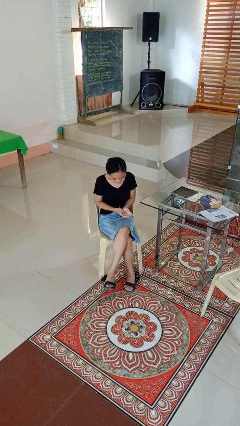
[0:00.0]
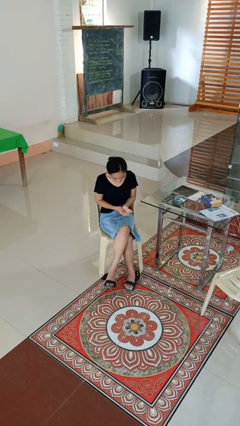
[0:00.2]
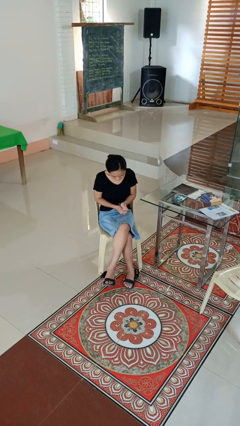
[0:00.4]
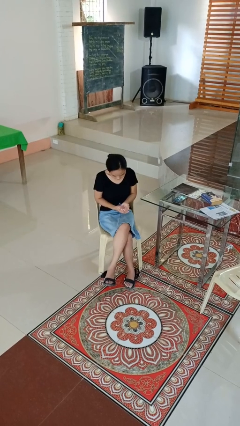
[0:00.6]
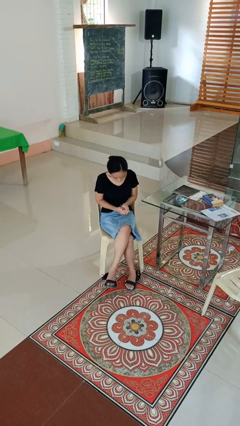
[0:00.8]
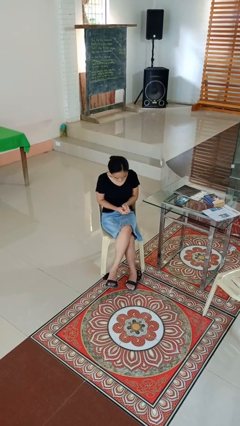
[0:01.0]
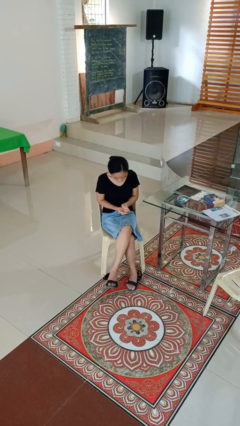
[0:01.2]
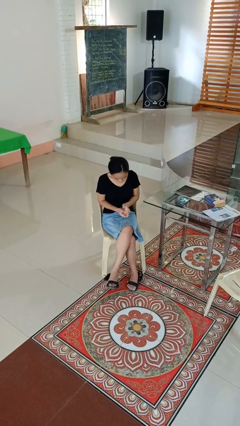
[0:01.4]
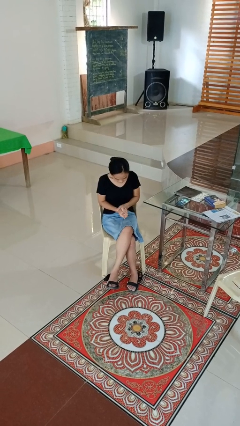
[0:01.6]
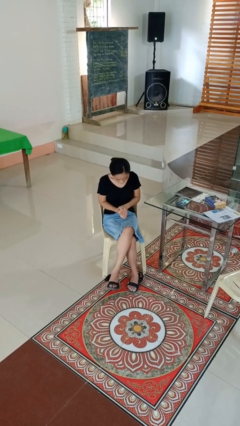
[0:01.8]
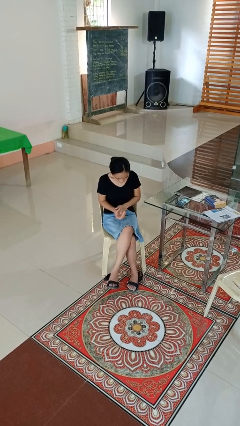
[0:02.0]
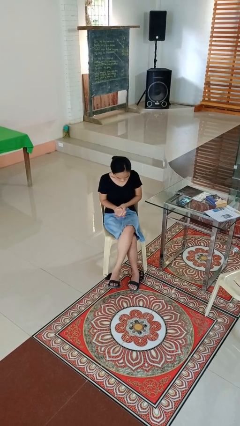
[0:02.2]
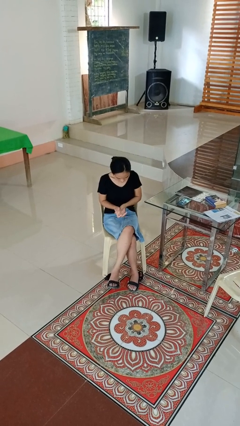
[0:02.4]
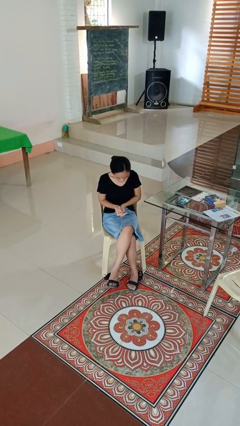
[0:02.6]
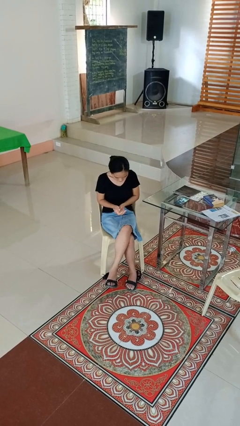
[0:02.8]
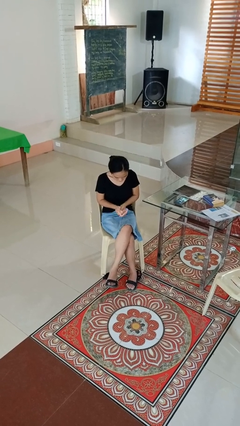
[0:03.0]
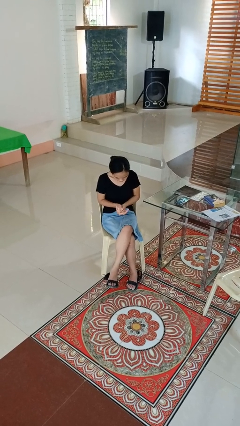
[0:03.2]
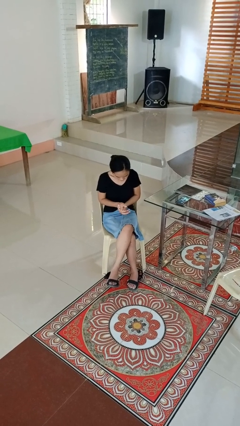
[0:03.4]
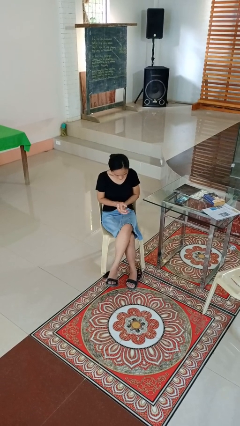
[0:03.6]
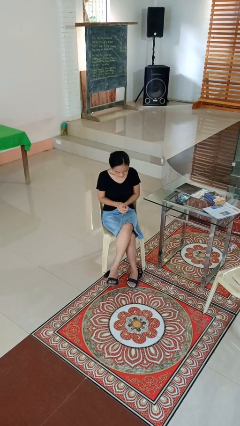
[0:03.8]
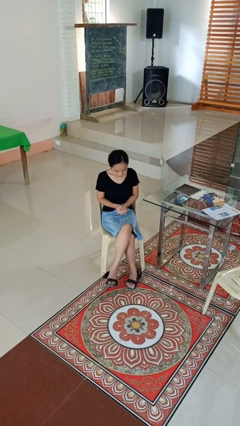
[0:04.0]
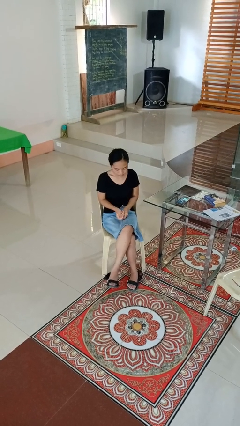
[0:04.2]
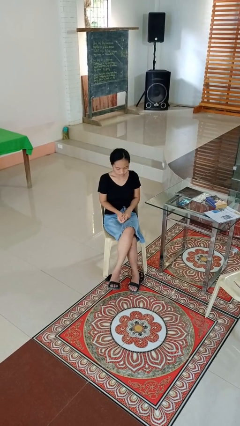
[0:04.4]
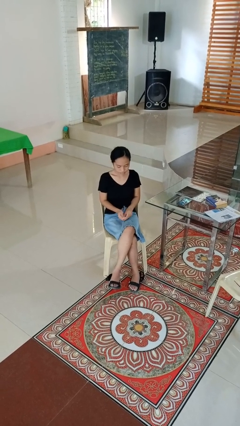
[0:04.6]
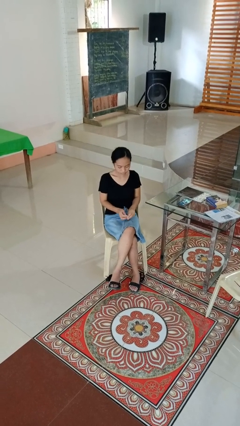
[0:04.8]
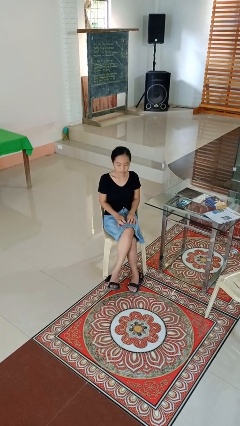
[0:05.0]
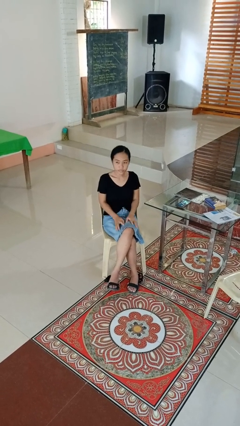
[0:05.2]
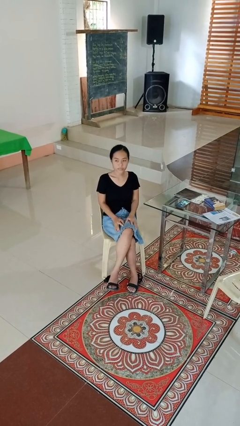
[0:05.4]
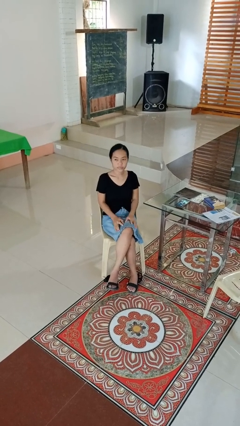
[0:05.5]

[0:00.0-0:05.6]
person looks at hands in lap

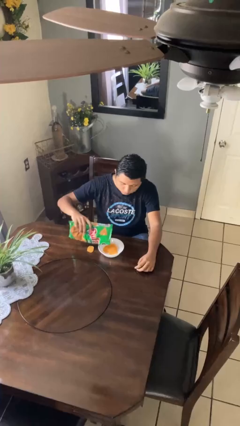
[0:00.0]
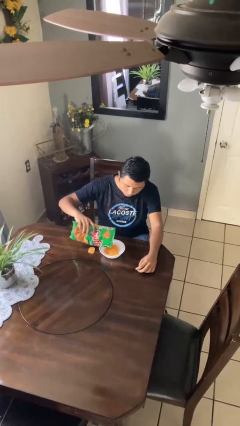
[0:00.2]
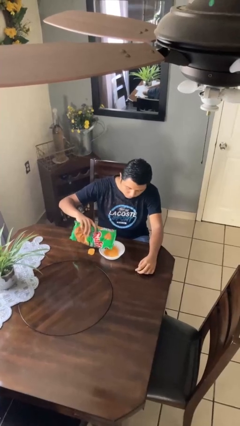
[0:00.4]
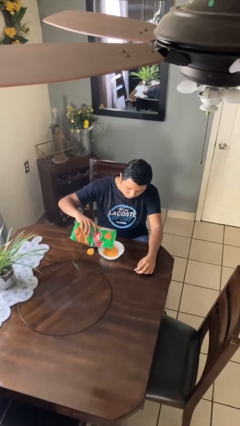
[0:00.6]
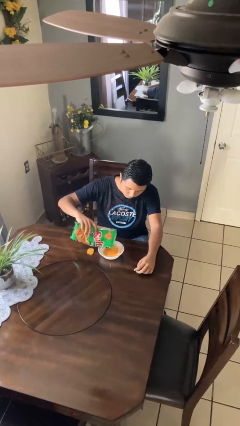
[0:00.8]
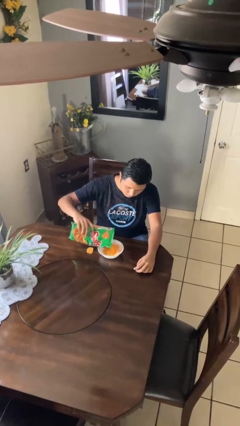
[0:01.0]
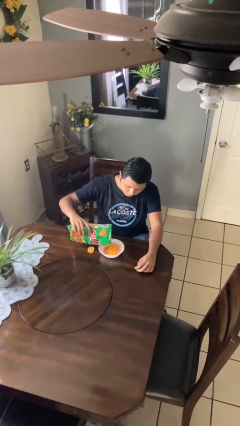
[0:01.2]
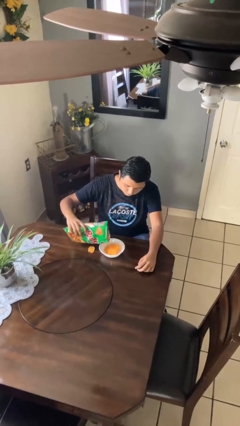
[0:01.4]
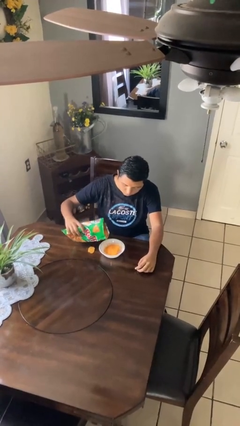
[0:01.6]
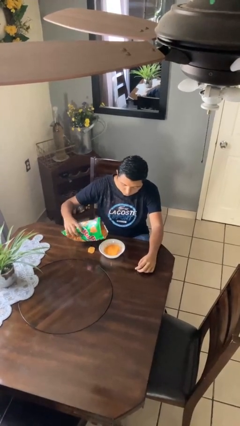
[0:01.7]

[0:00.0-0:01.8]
person pours into bowl

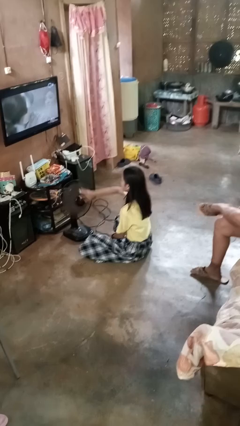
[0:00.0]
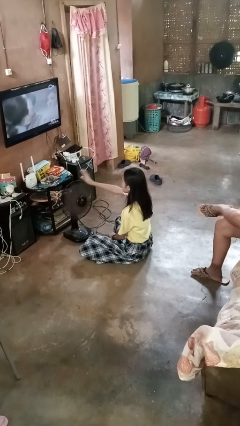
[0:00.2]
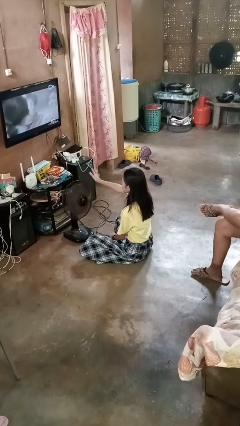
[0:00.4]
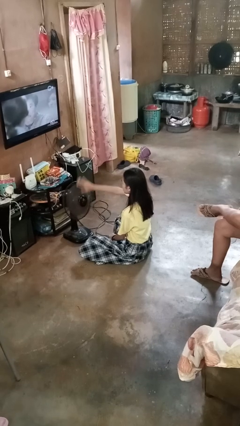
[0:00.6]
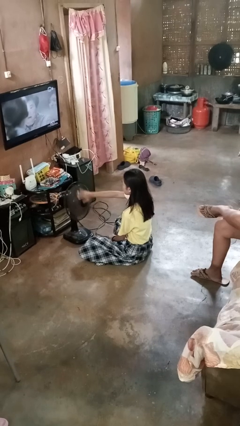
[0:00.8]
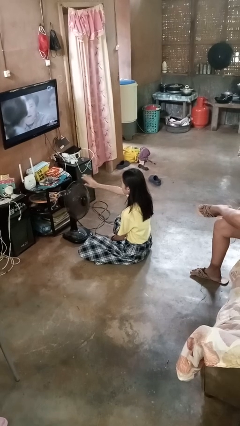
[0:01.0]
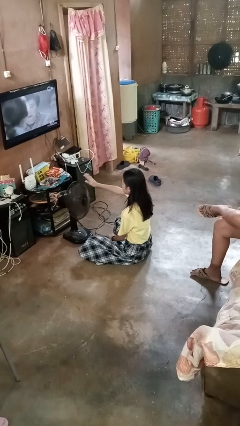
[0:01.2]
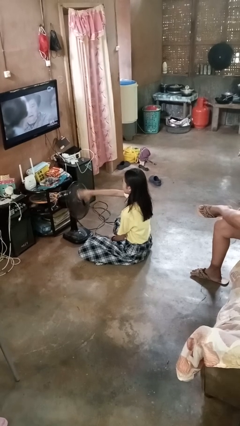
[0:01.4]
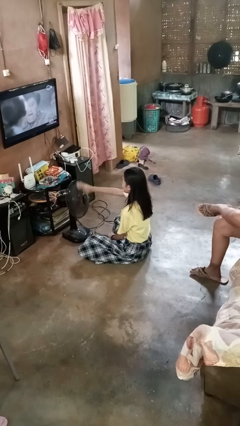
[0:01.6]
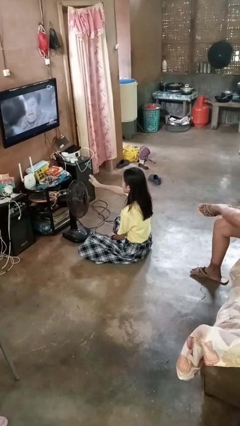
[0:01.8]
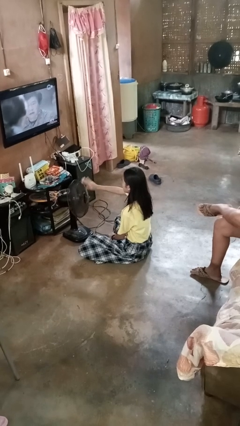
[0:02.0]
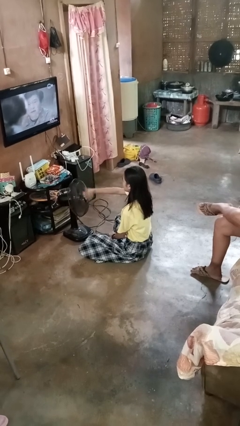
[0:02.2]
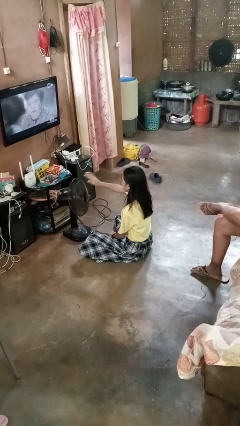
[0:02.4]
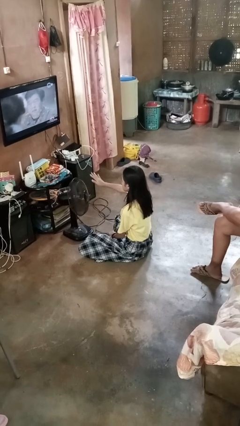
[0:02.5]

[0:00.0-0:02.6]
person waves hand over object

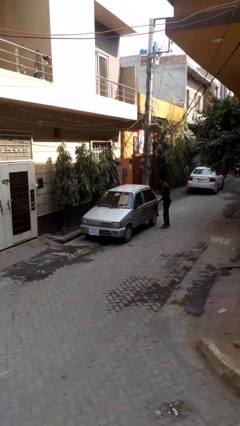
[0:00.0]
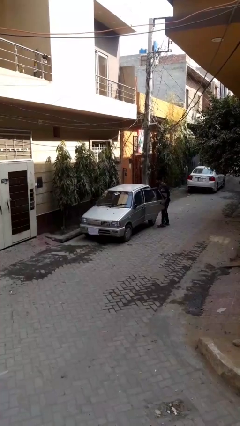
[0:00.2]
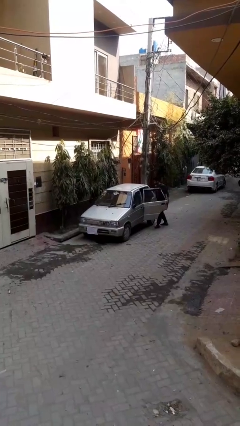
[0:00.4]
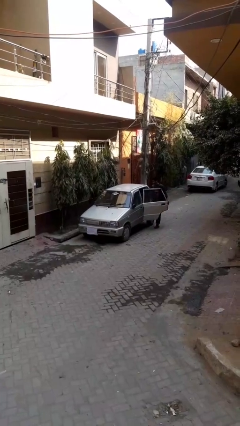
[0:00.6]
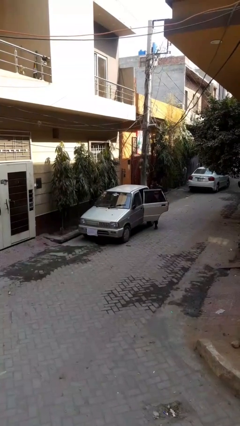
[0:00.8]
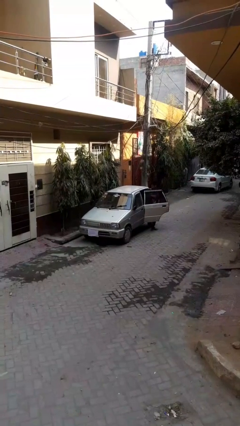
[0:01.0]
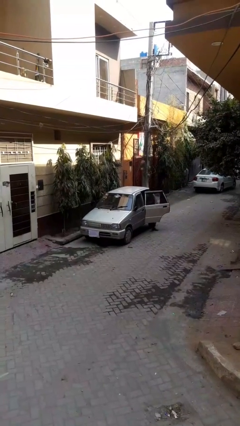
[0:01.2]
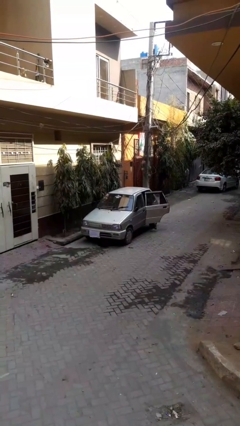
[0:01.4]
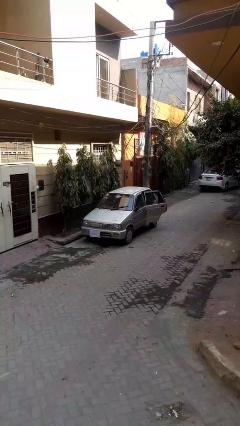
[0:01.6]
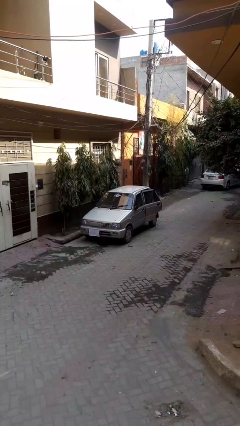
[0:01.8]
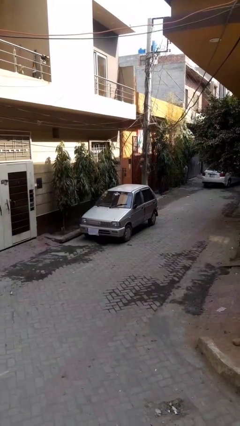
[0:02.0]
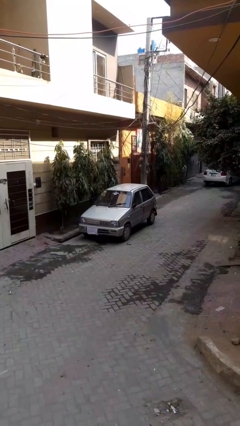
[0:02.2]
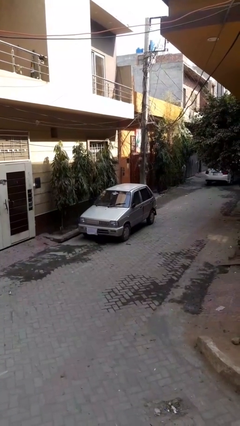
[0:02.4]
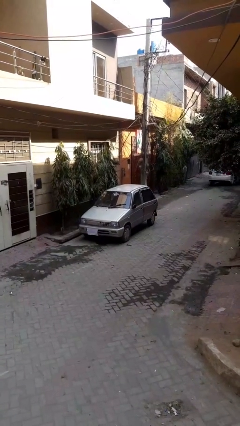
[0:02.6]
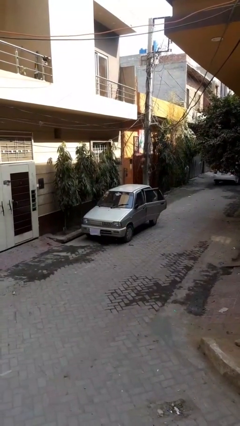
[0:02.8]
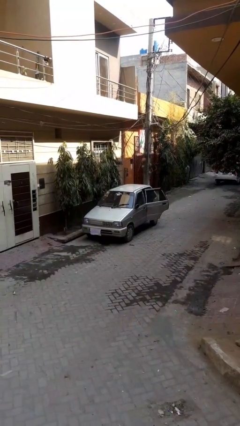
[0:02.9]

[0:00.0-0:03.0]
car picks up person

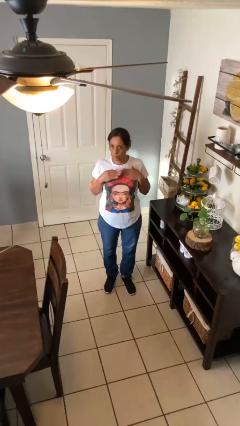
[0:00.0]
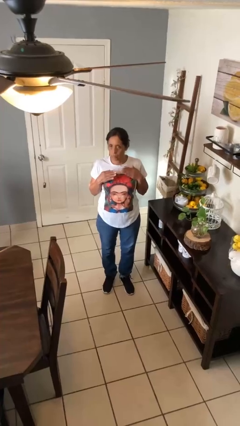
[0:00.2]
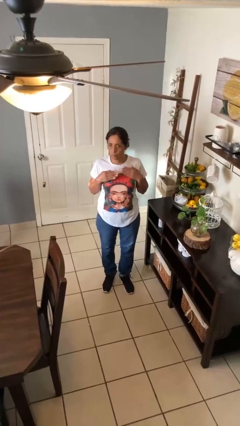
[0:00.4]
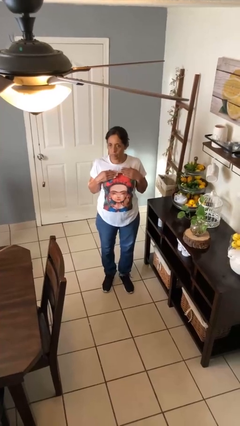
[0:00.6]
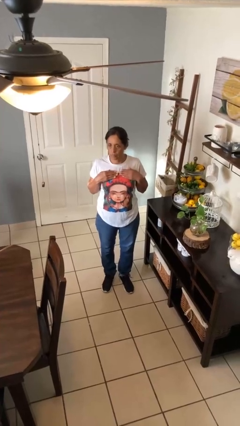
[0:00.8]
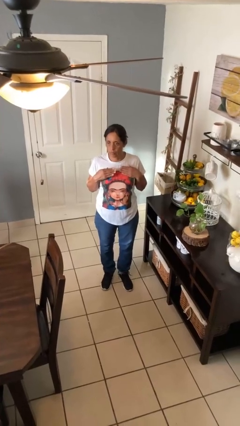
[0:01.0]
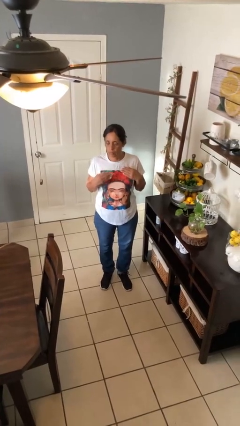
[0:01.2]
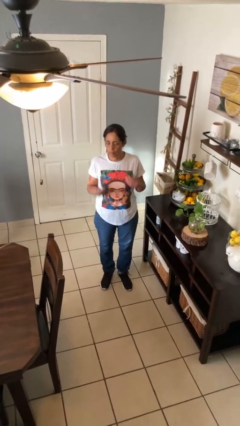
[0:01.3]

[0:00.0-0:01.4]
person drums on chest

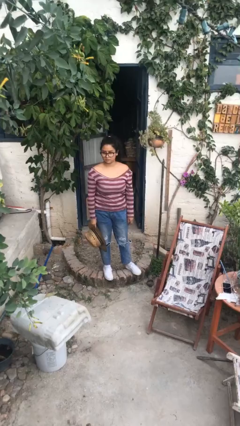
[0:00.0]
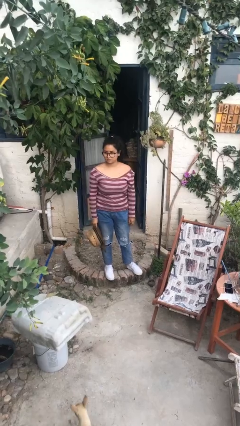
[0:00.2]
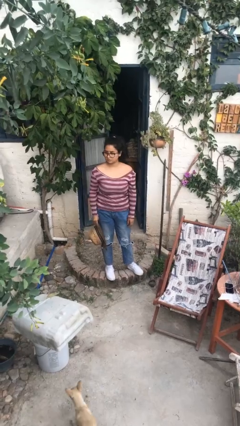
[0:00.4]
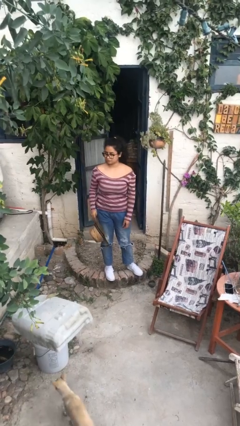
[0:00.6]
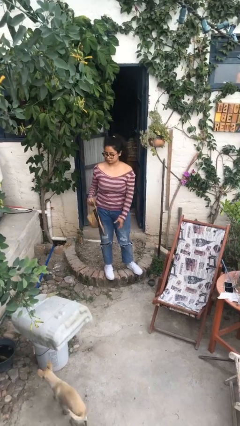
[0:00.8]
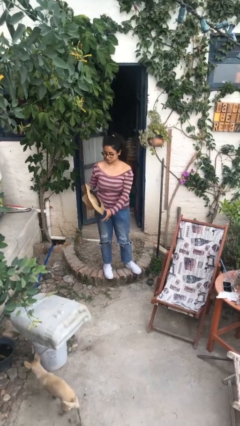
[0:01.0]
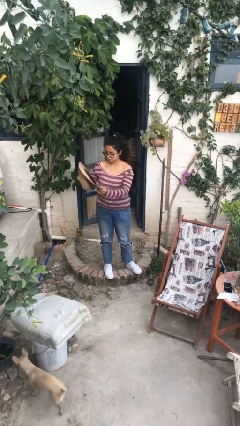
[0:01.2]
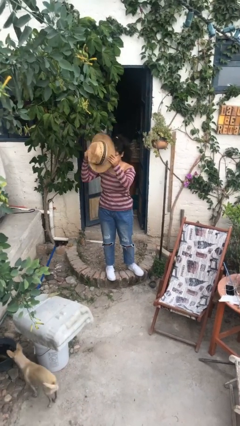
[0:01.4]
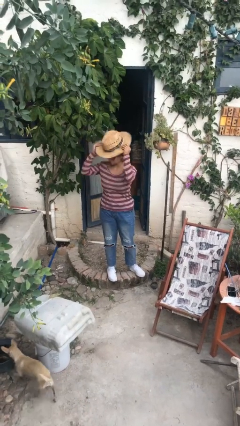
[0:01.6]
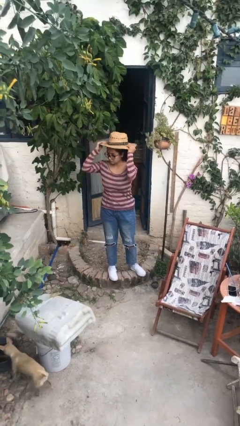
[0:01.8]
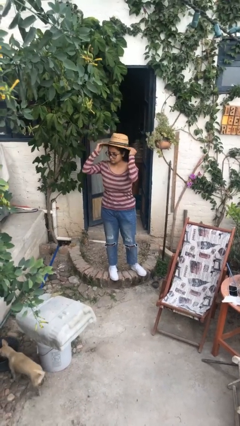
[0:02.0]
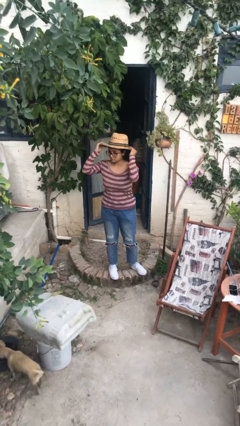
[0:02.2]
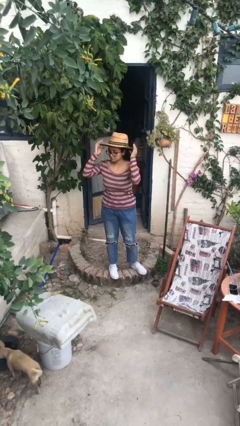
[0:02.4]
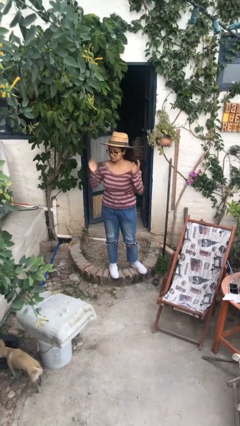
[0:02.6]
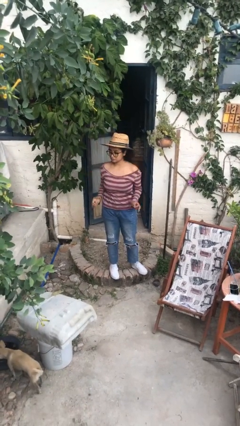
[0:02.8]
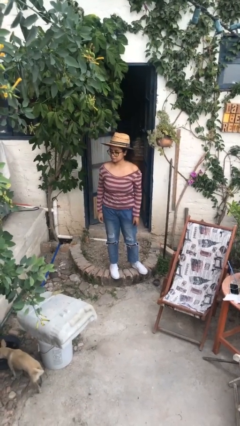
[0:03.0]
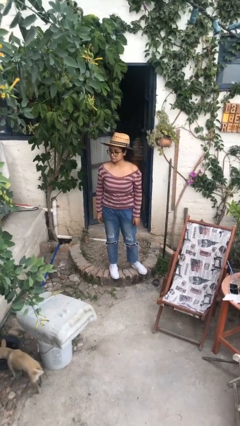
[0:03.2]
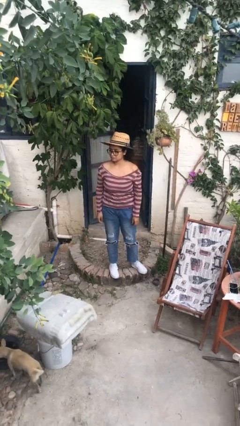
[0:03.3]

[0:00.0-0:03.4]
person puts on hat
